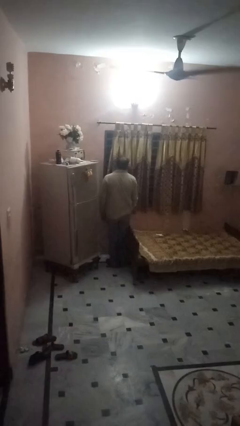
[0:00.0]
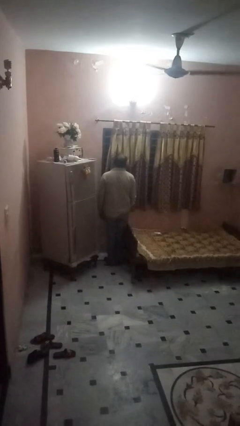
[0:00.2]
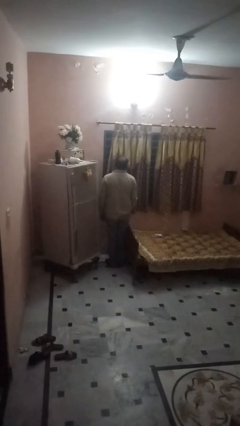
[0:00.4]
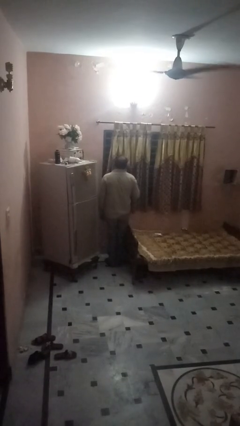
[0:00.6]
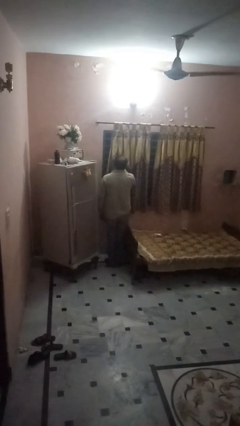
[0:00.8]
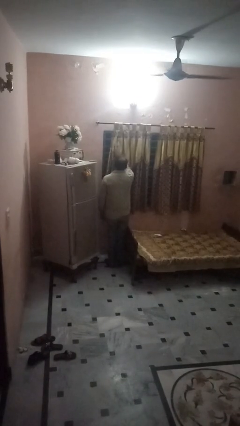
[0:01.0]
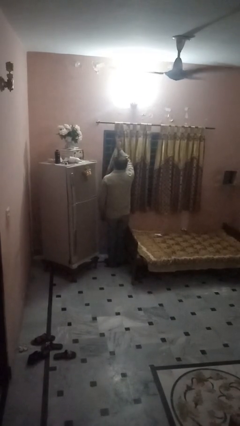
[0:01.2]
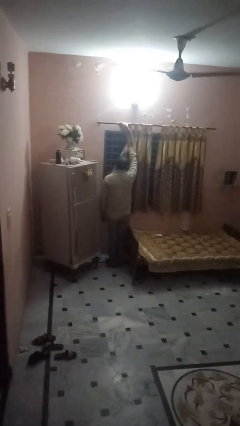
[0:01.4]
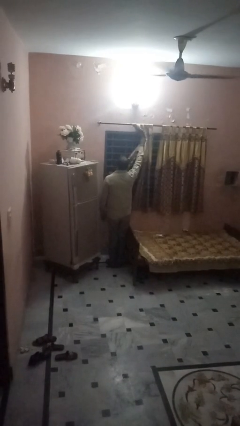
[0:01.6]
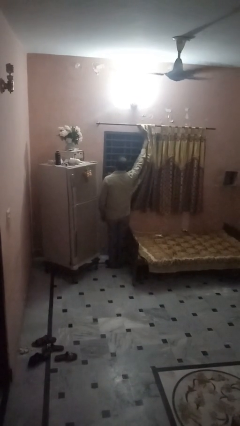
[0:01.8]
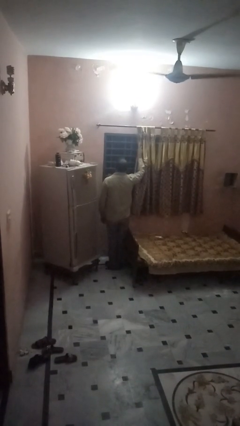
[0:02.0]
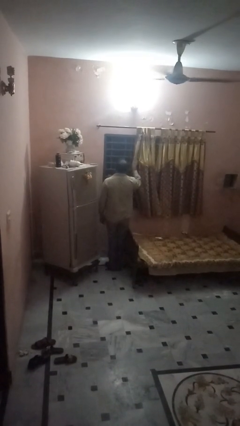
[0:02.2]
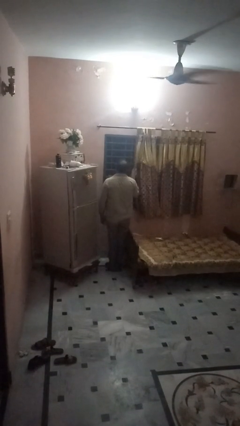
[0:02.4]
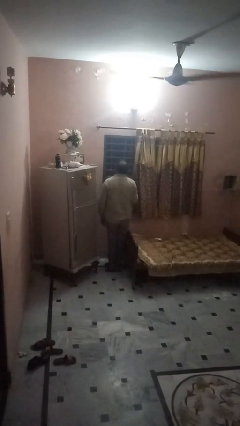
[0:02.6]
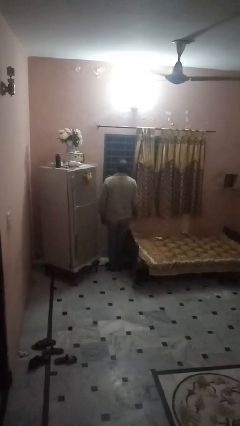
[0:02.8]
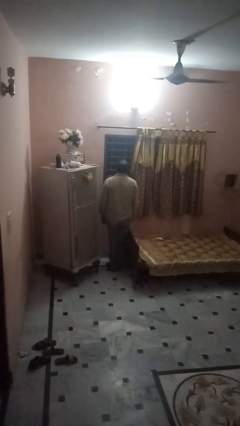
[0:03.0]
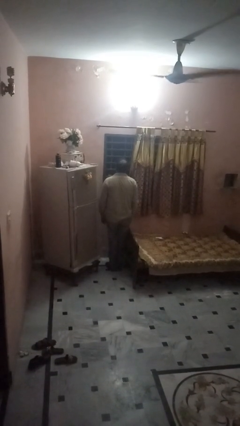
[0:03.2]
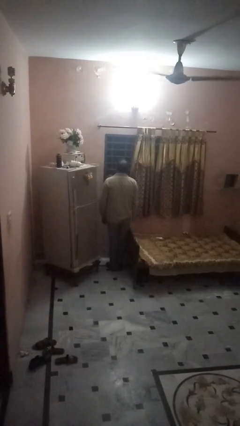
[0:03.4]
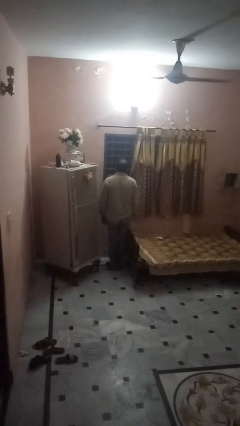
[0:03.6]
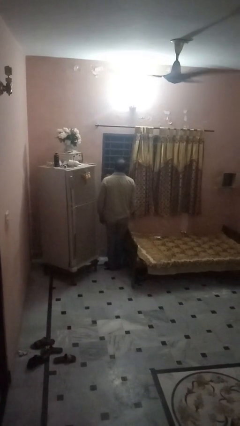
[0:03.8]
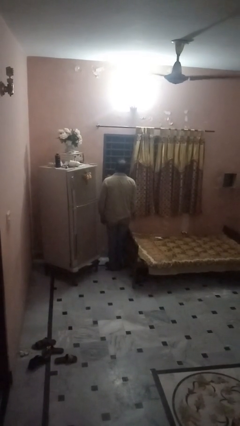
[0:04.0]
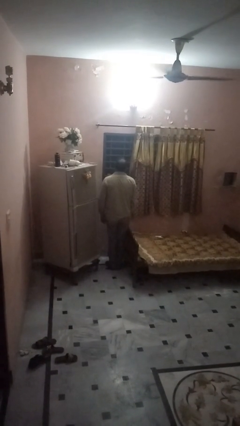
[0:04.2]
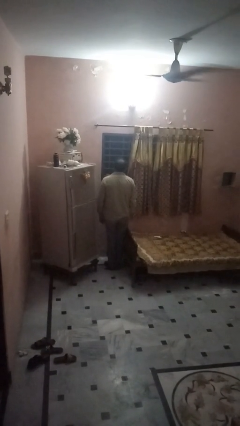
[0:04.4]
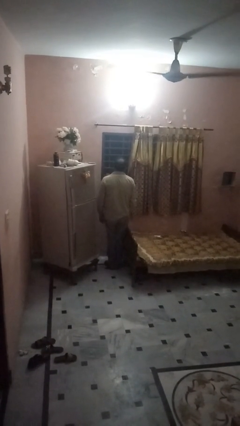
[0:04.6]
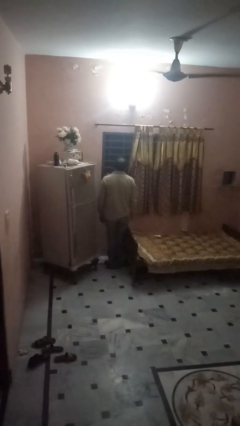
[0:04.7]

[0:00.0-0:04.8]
person opens curtains

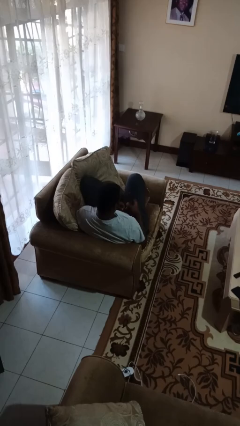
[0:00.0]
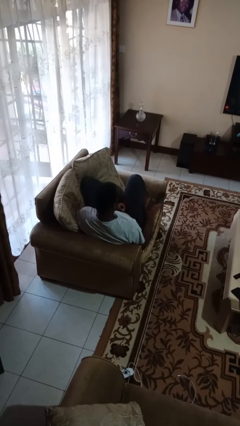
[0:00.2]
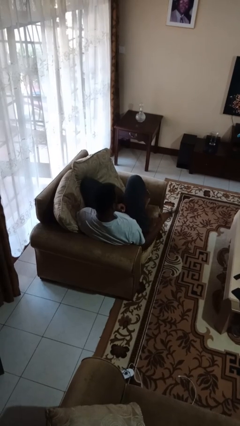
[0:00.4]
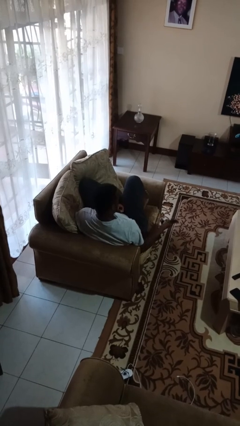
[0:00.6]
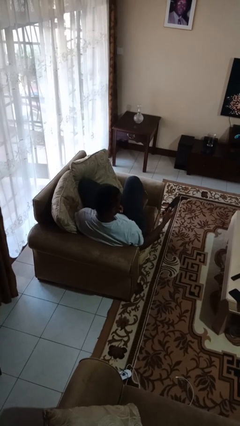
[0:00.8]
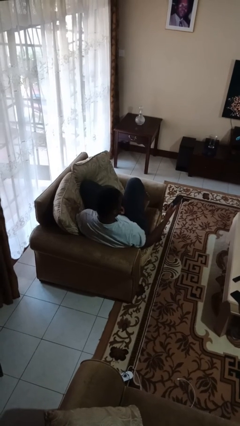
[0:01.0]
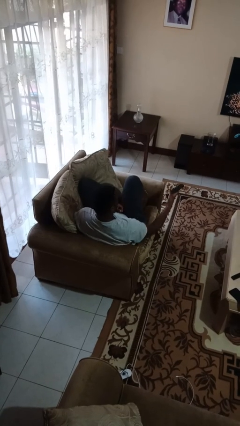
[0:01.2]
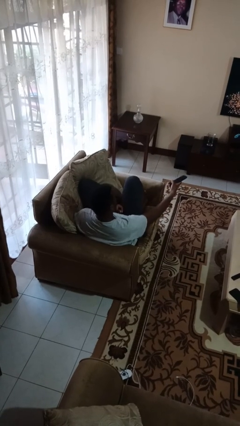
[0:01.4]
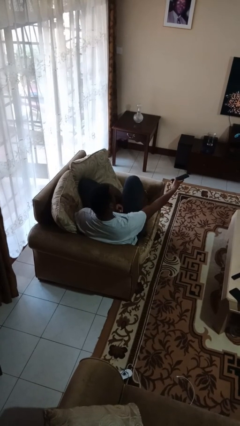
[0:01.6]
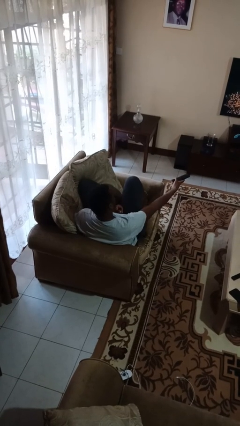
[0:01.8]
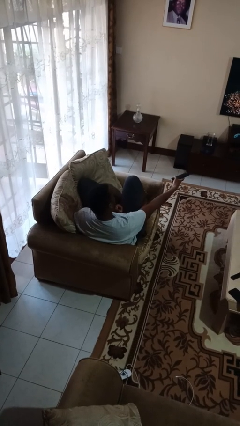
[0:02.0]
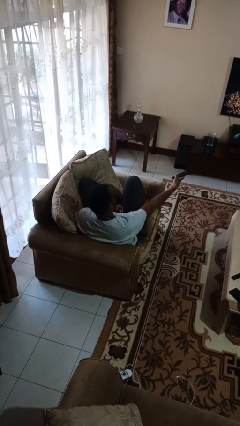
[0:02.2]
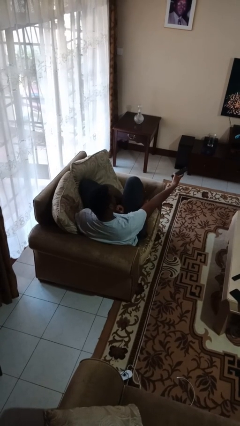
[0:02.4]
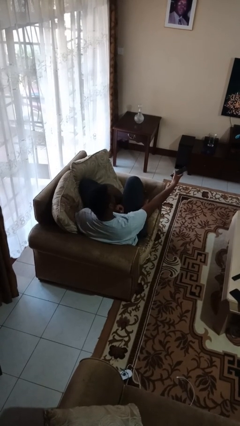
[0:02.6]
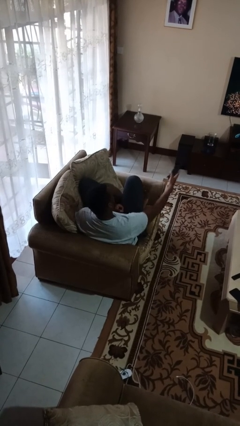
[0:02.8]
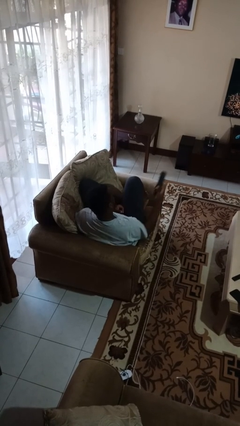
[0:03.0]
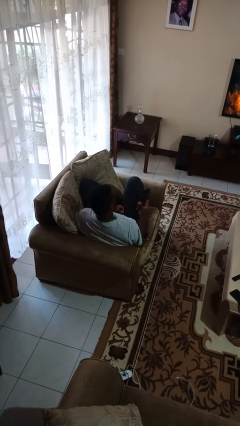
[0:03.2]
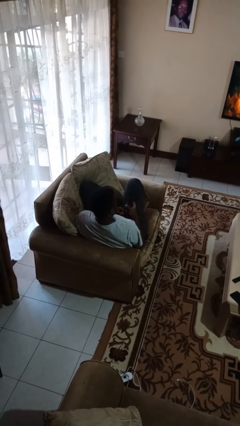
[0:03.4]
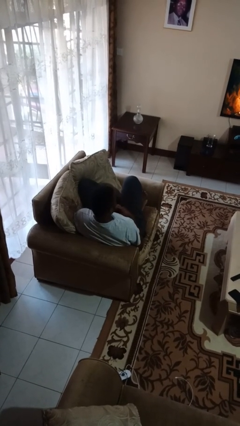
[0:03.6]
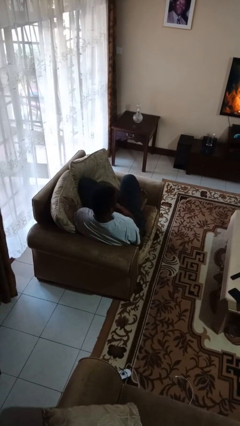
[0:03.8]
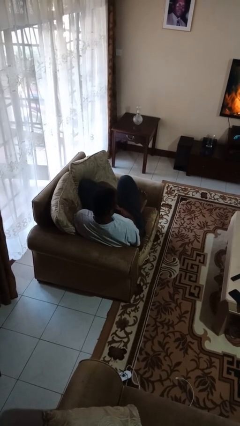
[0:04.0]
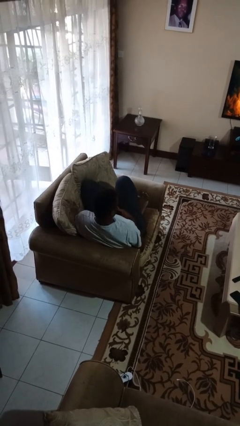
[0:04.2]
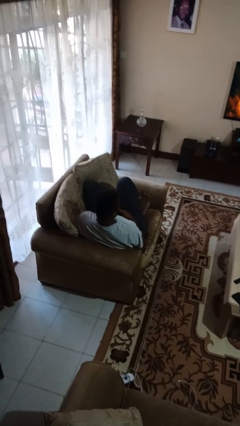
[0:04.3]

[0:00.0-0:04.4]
person uses television remote

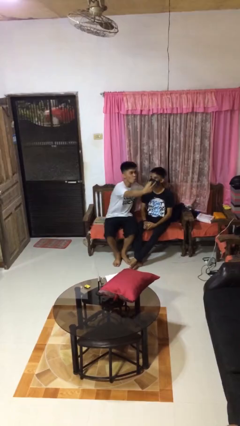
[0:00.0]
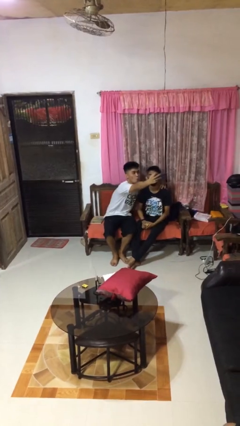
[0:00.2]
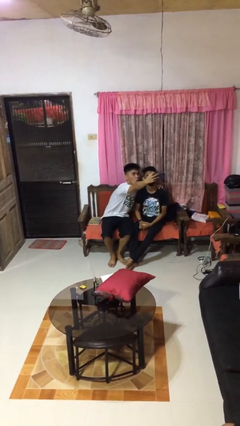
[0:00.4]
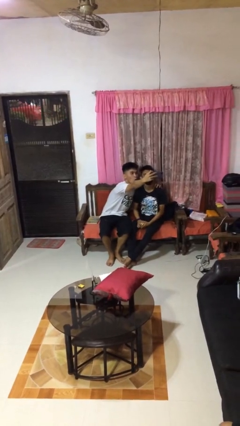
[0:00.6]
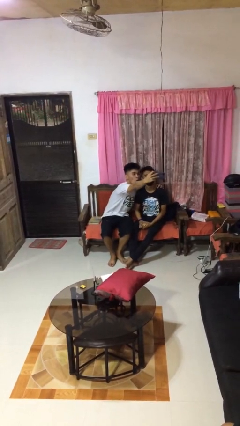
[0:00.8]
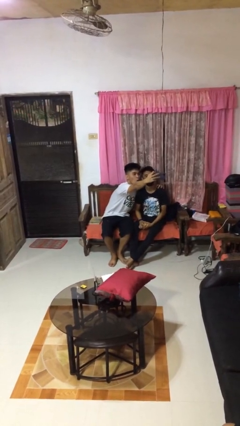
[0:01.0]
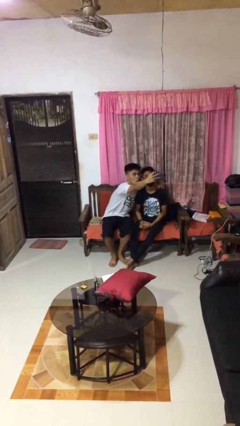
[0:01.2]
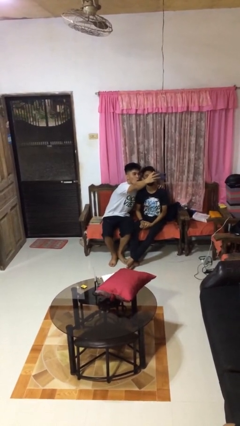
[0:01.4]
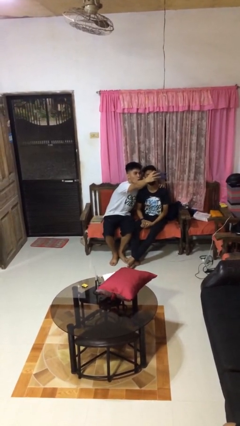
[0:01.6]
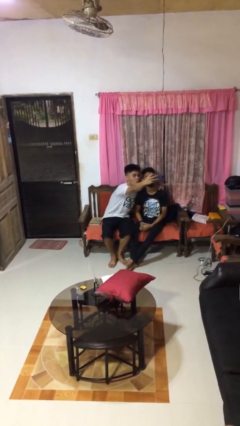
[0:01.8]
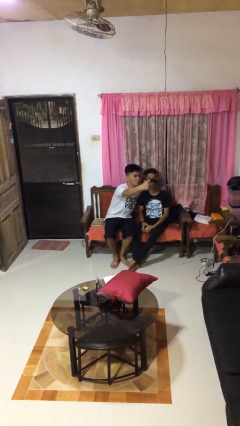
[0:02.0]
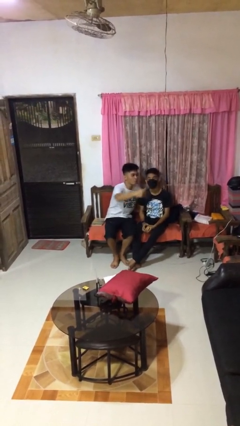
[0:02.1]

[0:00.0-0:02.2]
person takes selfie with person

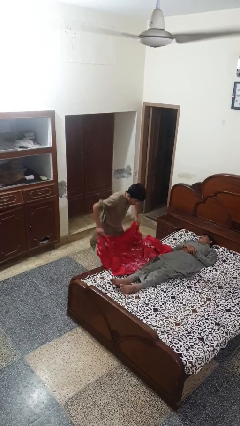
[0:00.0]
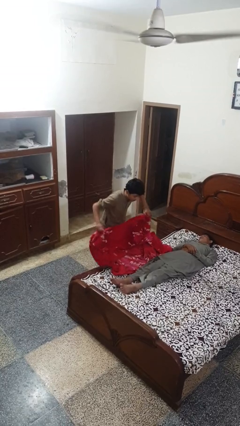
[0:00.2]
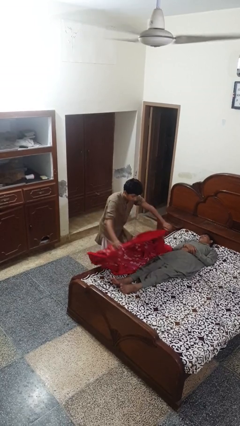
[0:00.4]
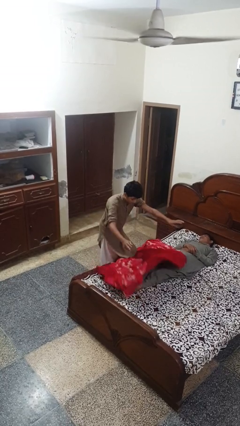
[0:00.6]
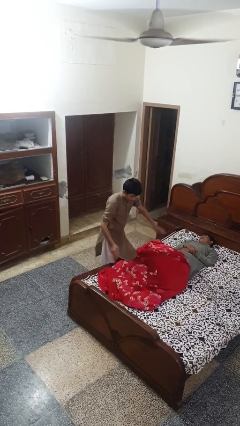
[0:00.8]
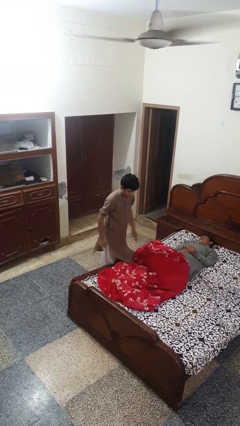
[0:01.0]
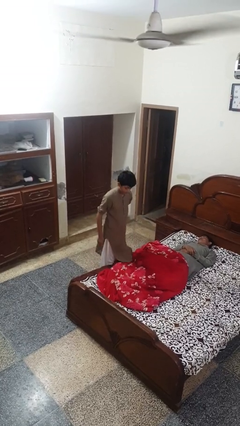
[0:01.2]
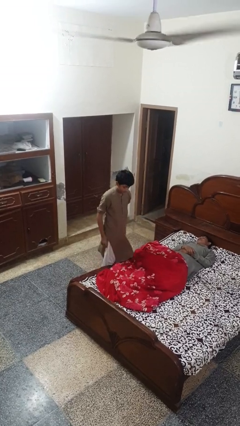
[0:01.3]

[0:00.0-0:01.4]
person covers friend with blanket

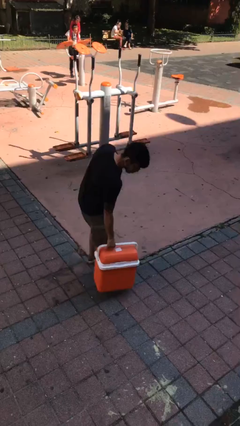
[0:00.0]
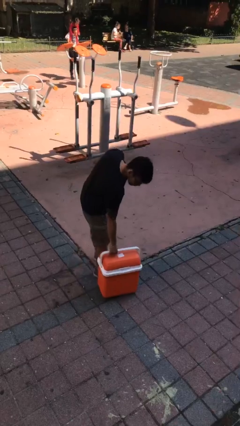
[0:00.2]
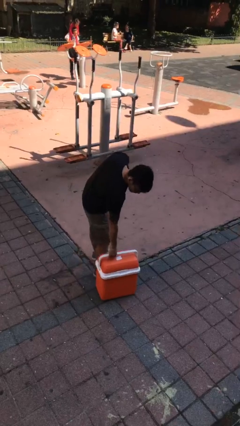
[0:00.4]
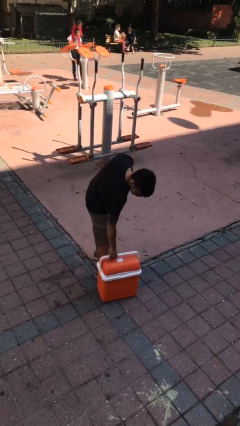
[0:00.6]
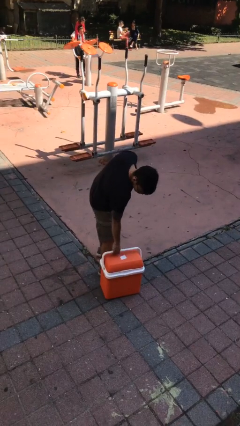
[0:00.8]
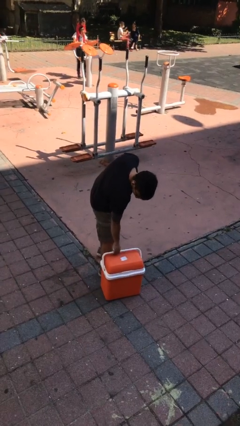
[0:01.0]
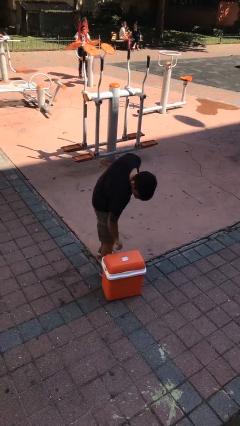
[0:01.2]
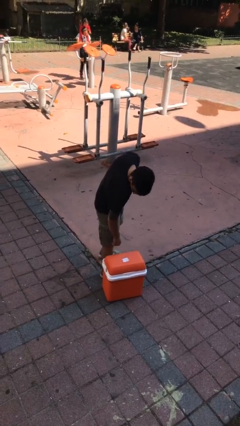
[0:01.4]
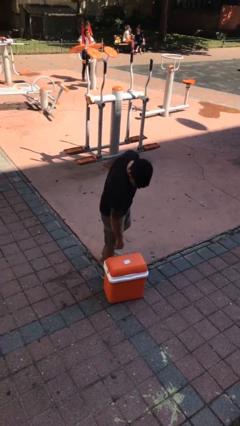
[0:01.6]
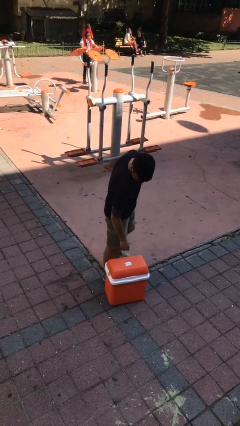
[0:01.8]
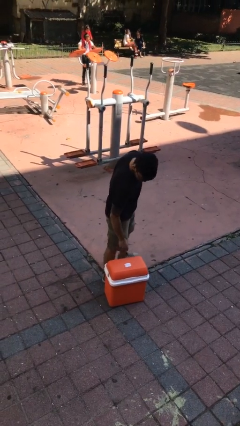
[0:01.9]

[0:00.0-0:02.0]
person puts down object on floor

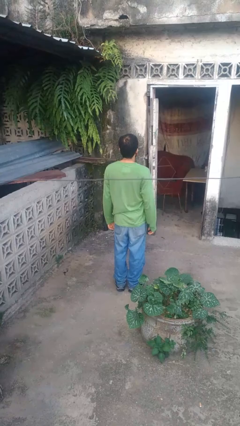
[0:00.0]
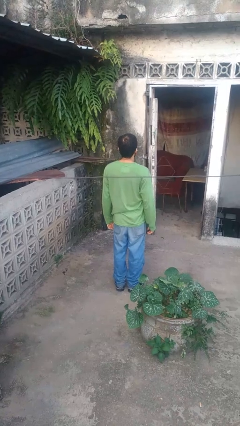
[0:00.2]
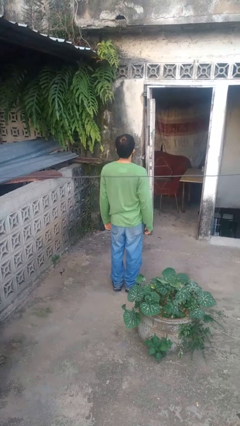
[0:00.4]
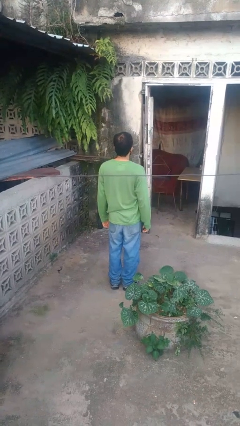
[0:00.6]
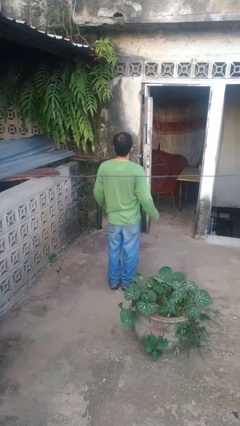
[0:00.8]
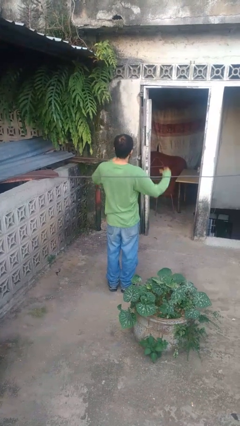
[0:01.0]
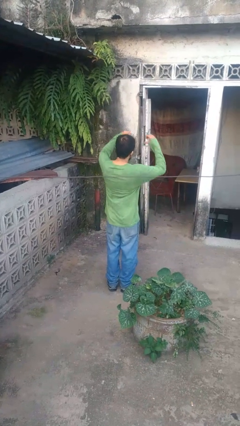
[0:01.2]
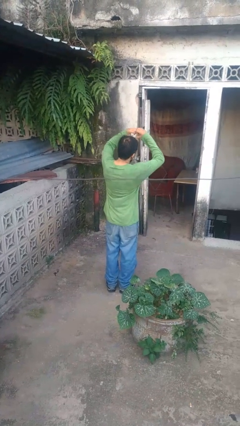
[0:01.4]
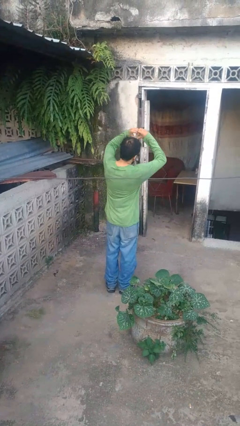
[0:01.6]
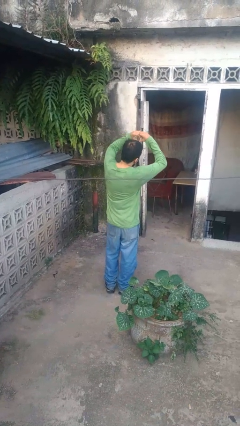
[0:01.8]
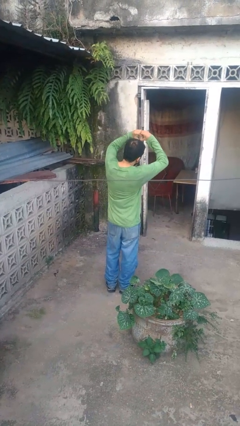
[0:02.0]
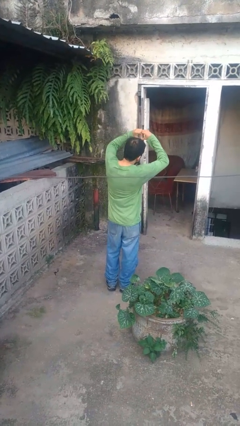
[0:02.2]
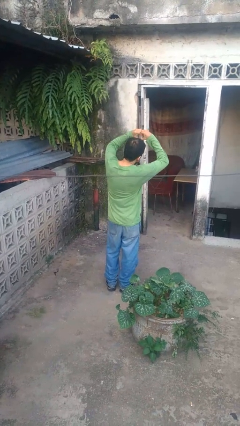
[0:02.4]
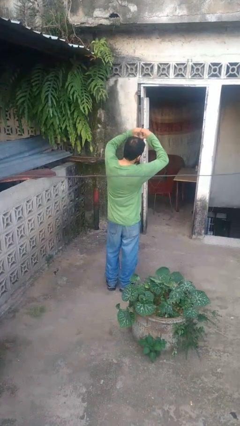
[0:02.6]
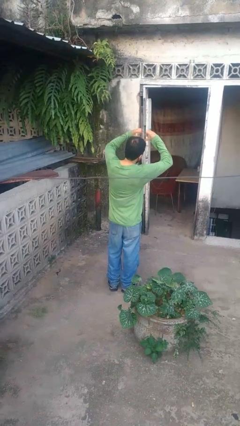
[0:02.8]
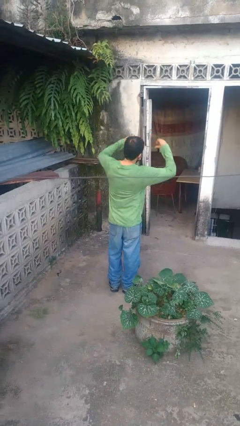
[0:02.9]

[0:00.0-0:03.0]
person gestures heart
